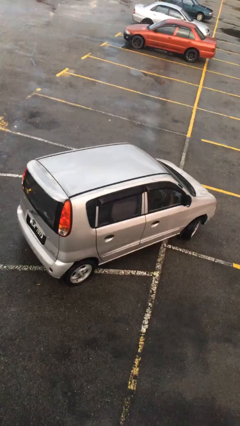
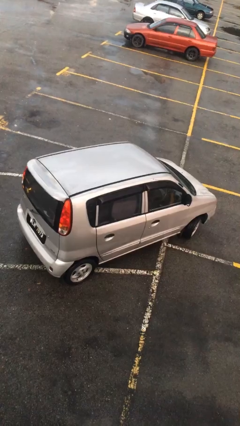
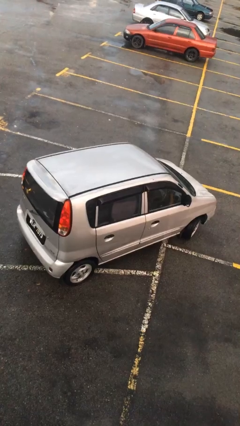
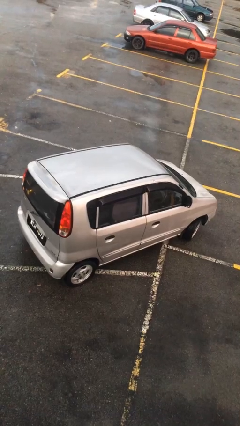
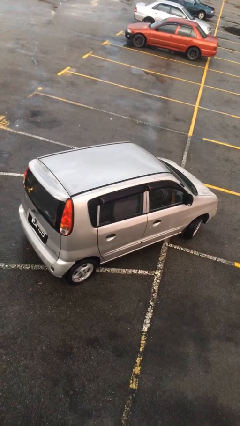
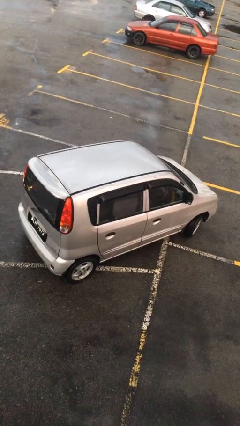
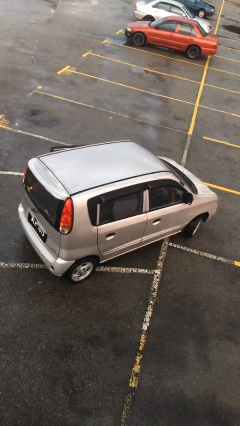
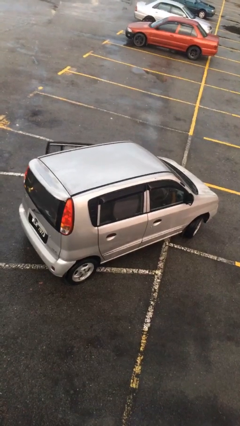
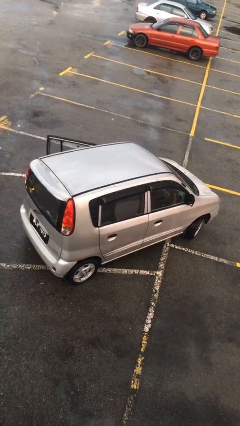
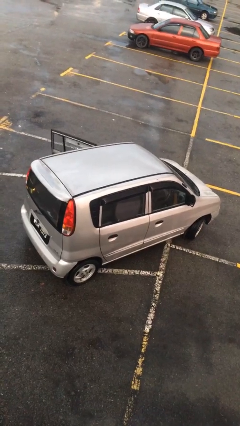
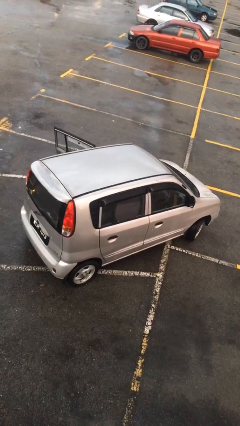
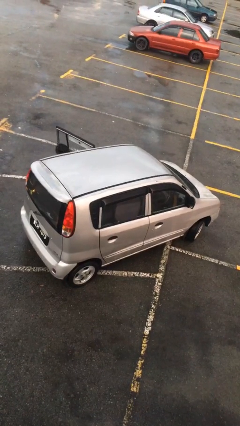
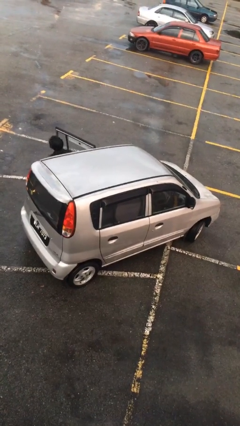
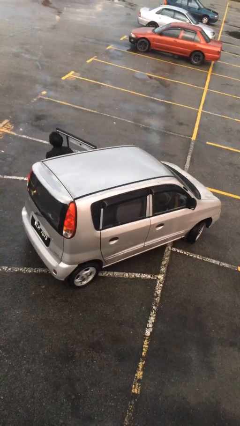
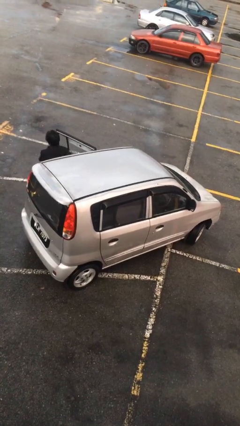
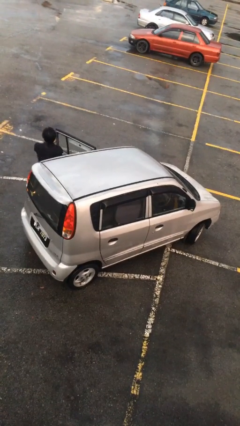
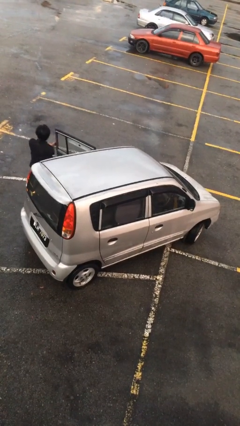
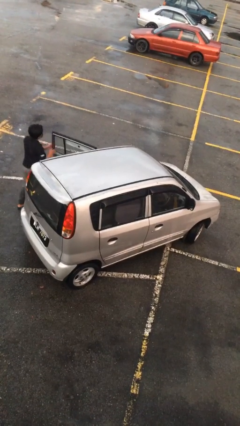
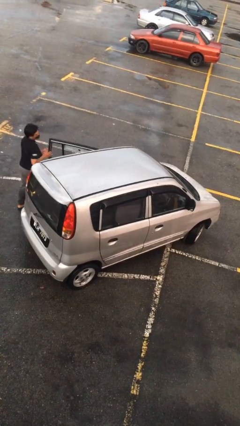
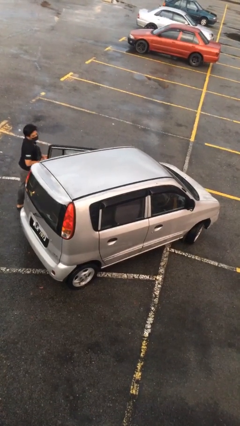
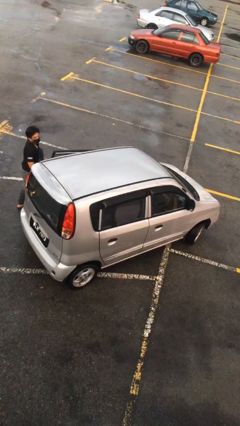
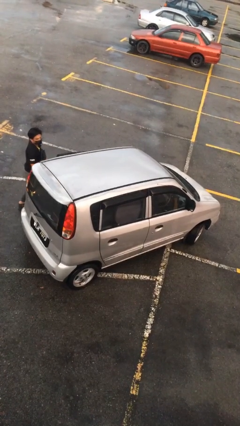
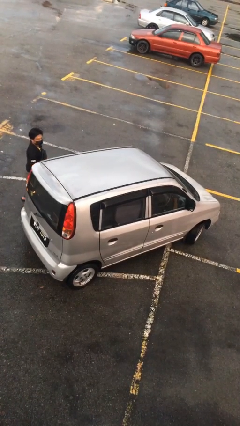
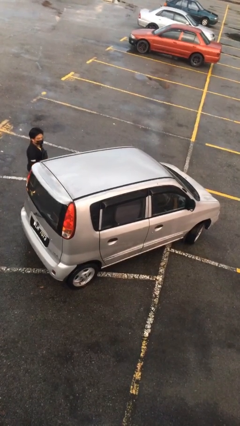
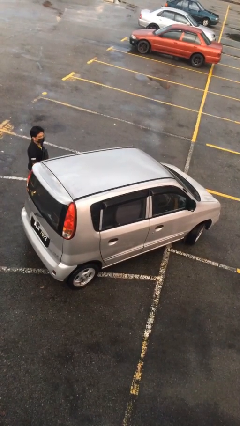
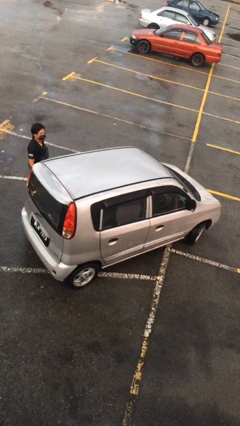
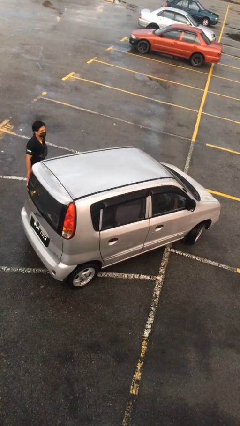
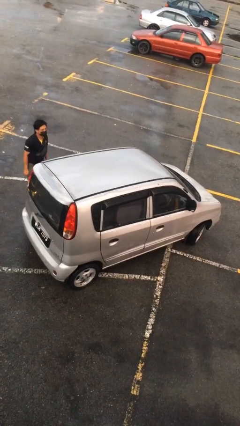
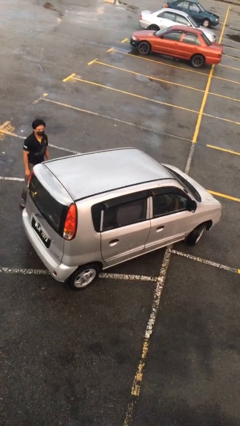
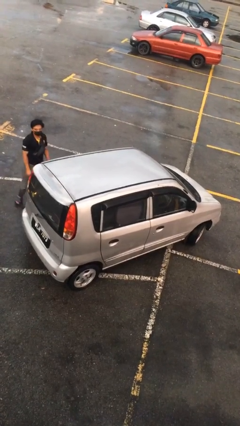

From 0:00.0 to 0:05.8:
car drops off person

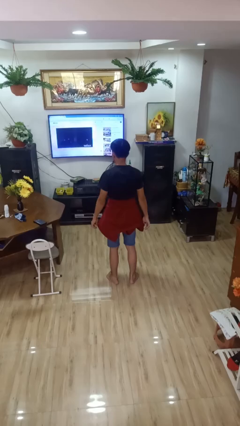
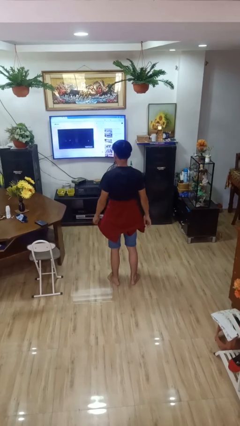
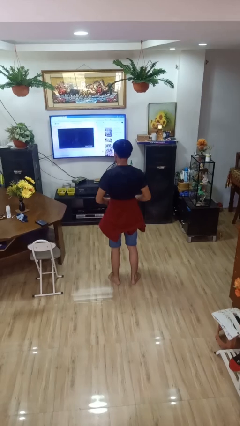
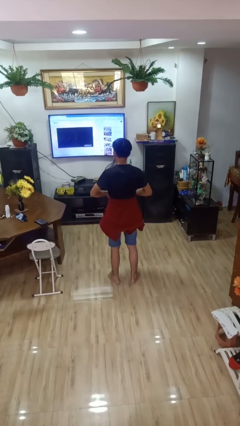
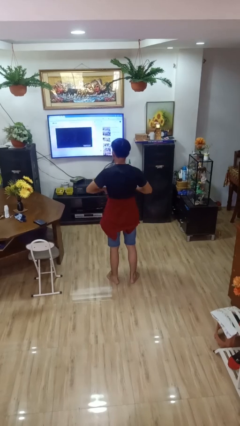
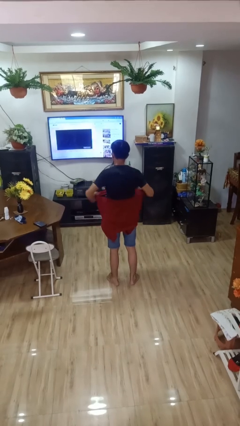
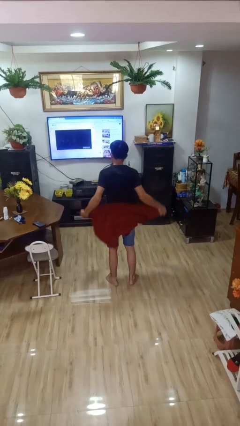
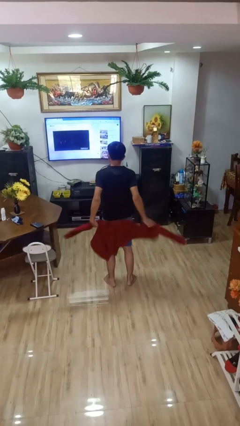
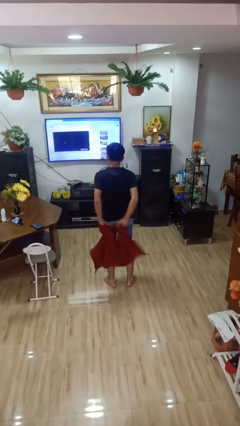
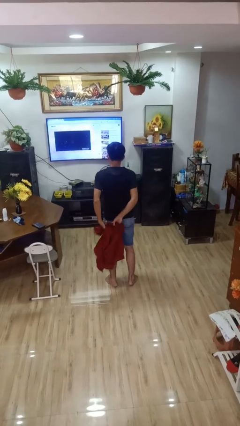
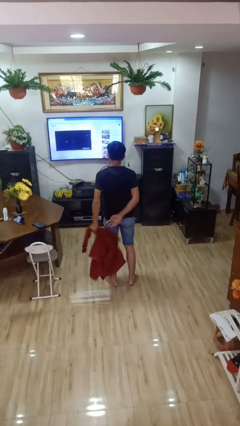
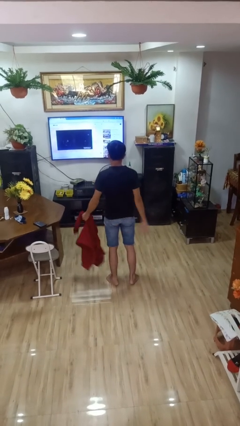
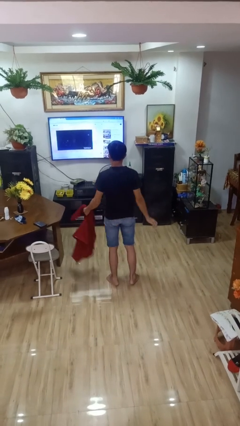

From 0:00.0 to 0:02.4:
person unties jacket around waist

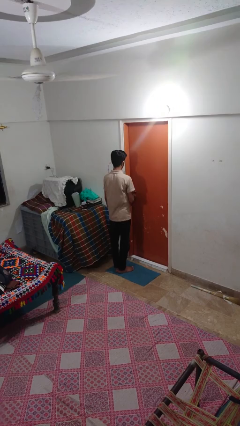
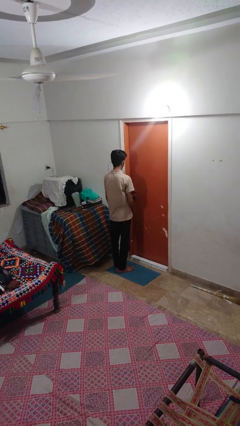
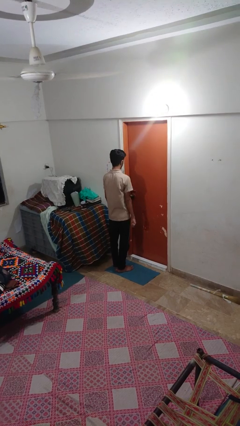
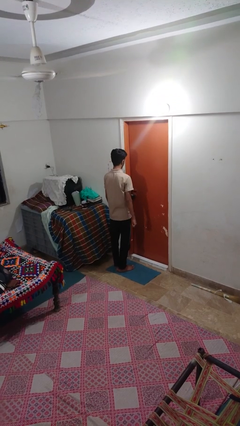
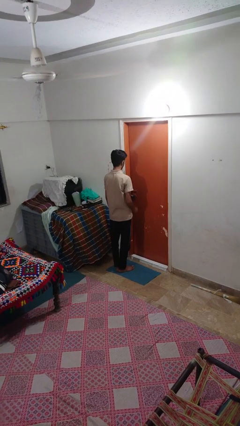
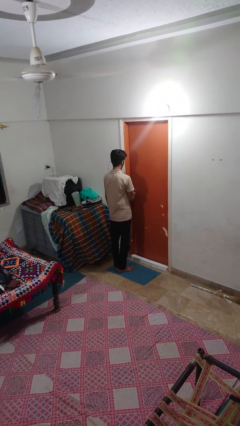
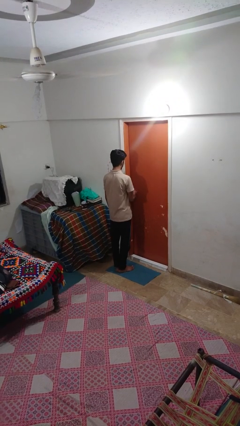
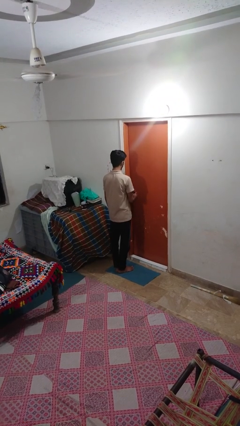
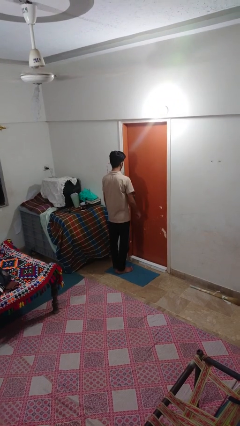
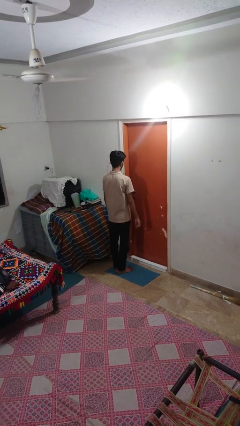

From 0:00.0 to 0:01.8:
person unlocks door with keys

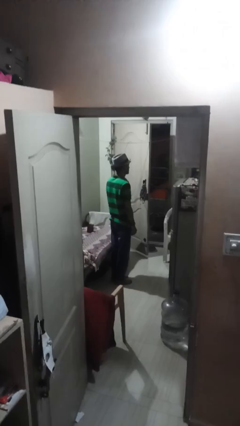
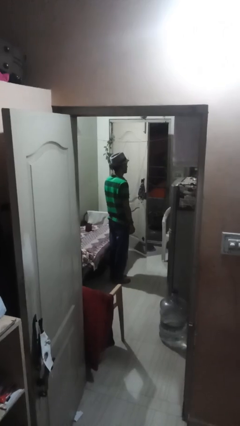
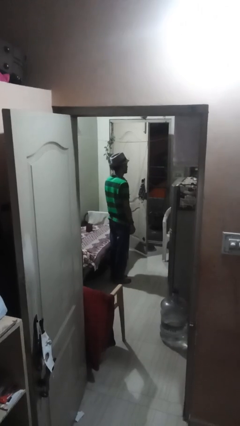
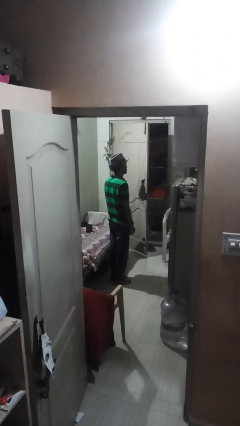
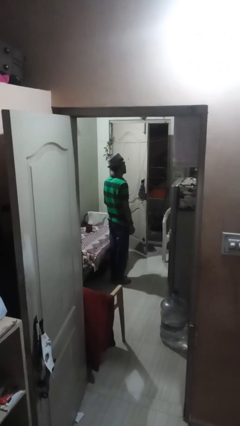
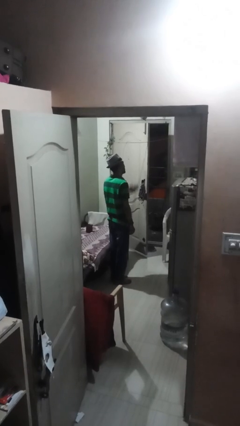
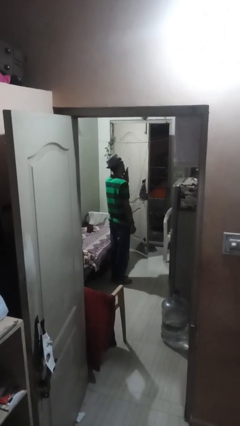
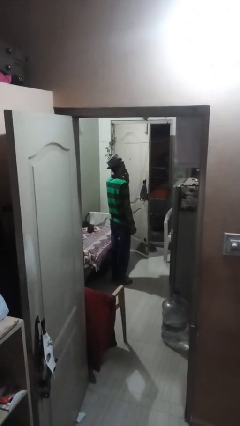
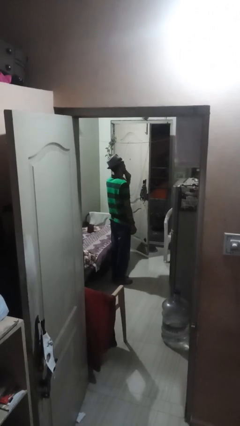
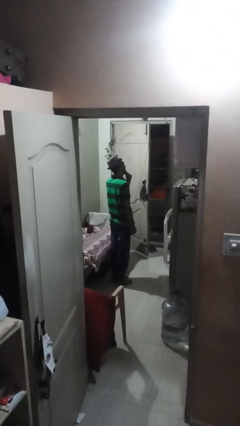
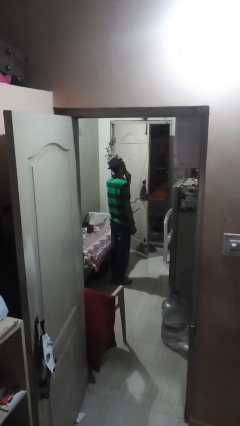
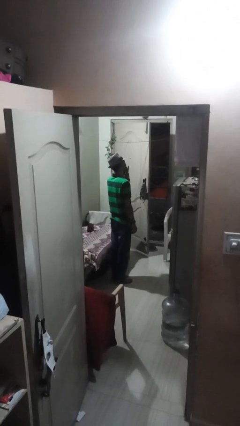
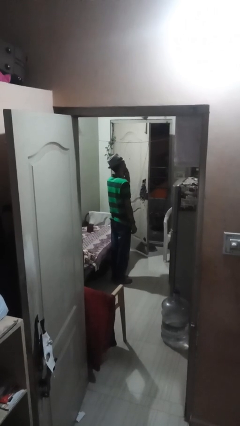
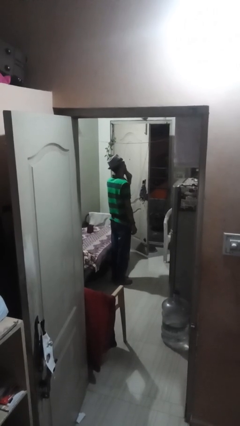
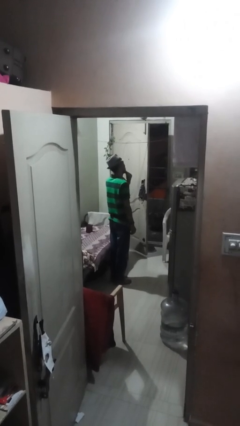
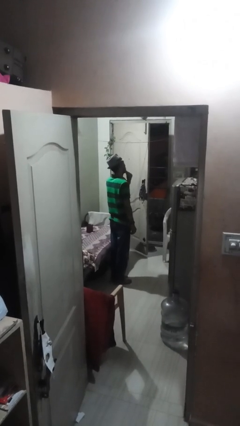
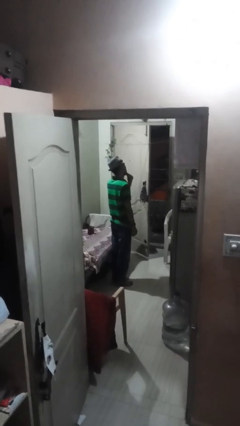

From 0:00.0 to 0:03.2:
person strokes chin

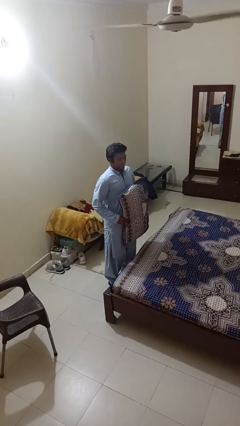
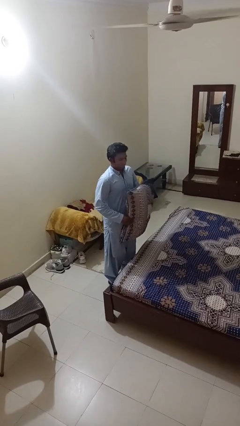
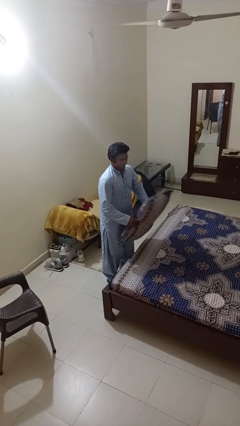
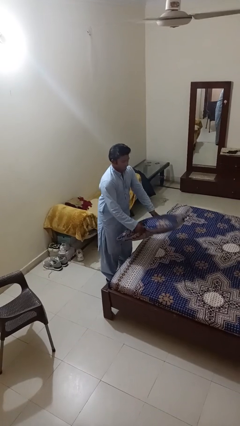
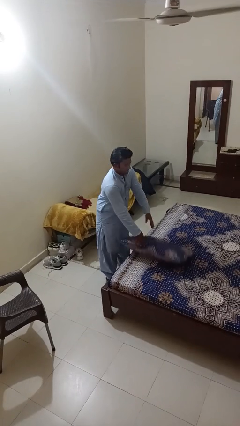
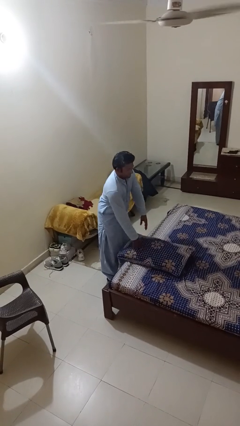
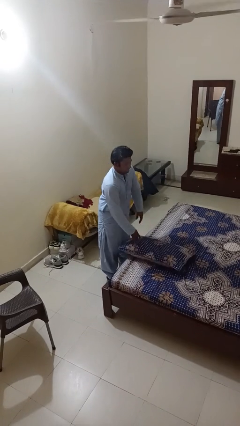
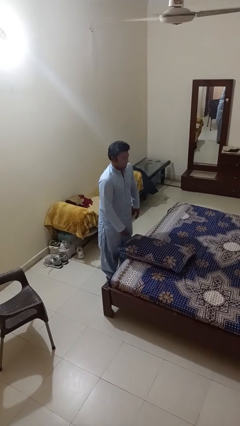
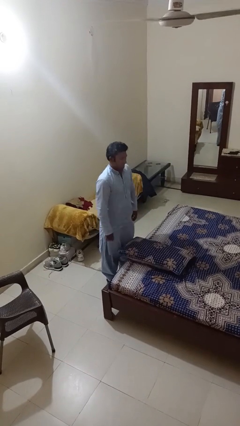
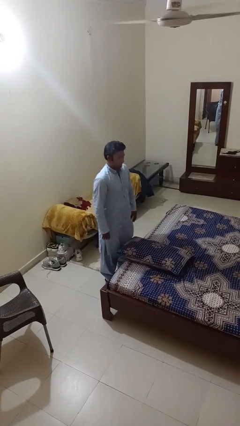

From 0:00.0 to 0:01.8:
person puts down object on bed

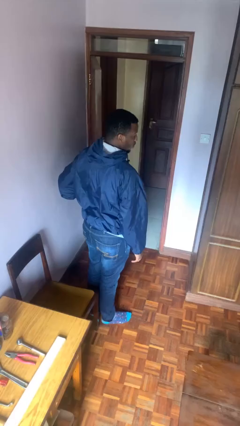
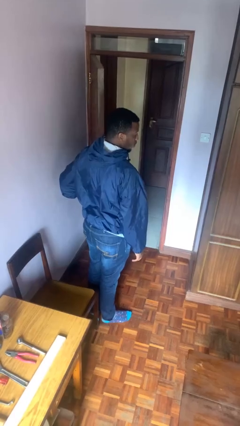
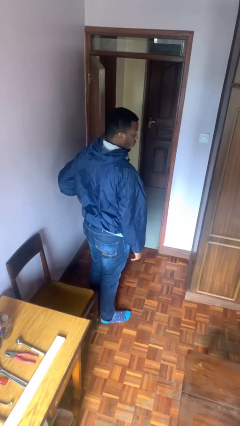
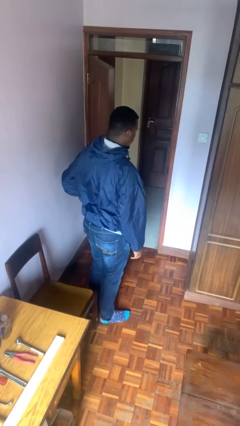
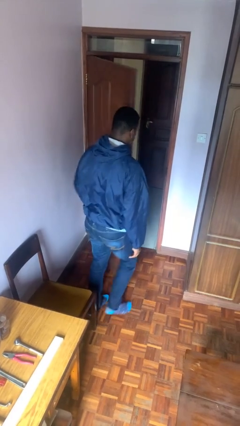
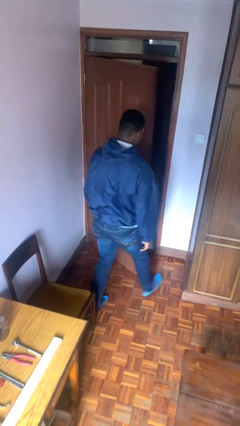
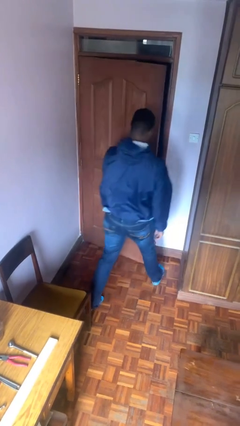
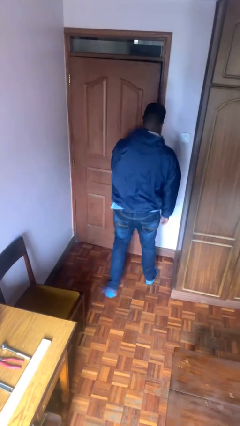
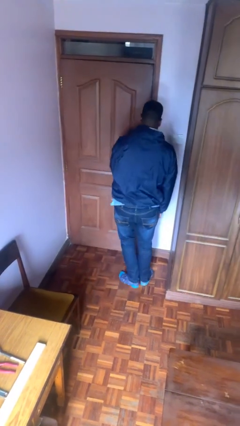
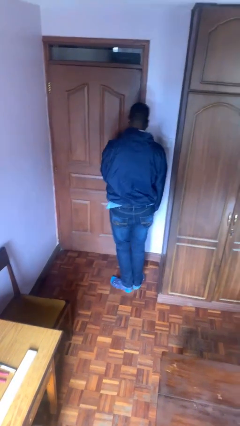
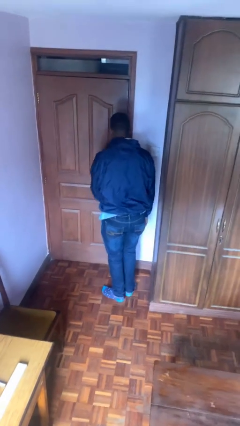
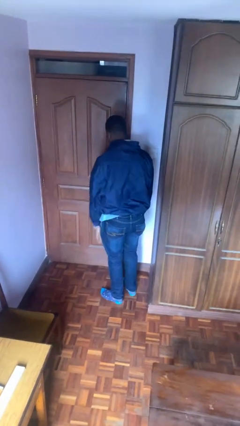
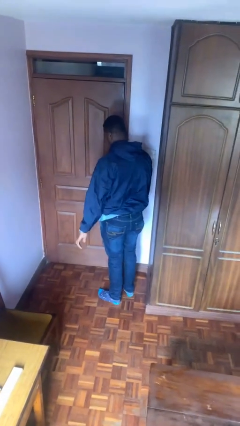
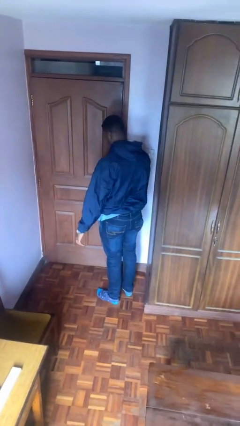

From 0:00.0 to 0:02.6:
person closes facility door
